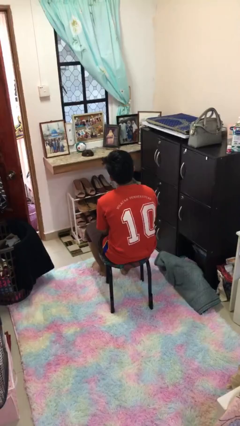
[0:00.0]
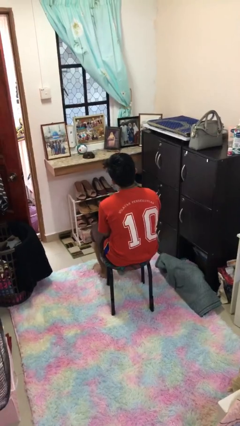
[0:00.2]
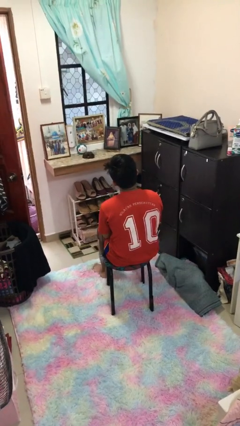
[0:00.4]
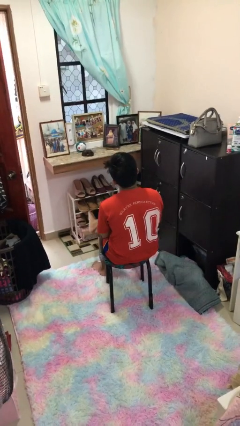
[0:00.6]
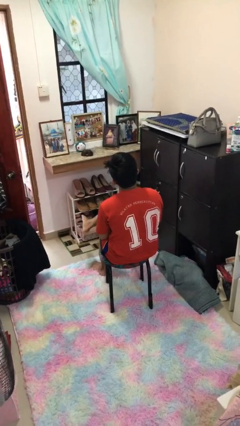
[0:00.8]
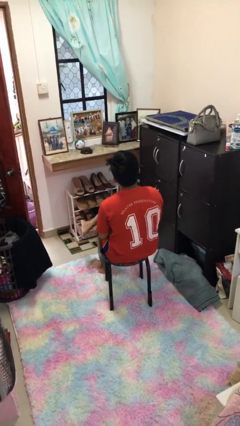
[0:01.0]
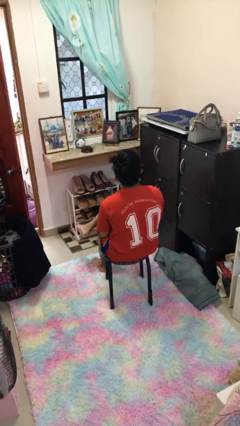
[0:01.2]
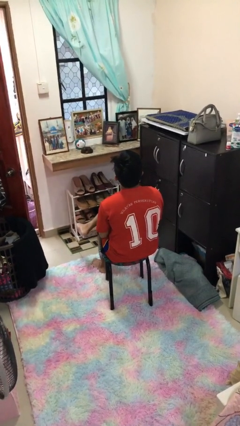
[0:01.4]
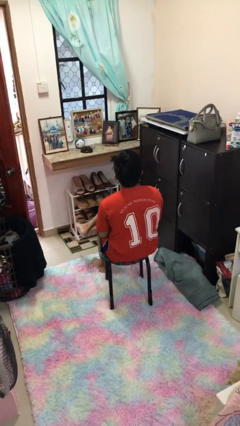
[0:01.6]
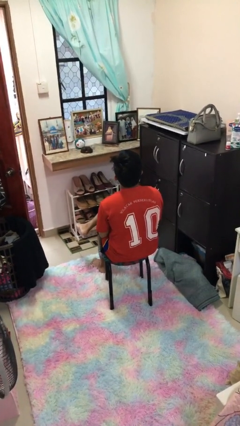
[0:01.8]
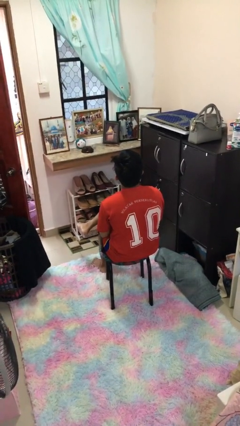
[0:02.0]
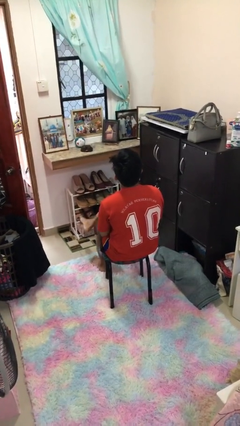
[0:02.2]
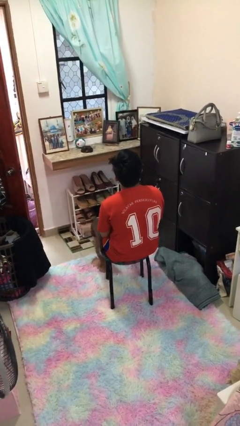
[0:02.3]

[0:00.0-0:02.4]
person crosses legs

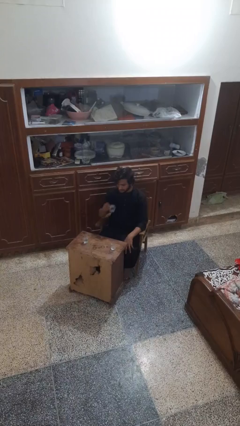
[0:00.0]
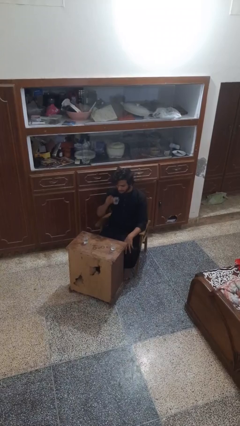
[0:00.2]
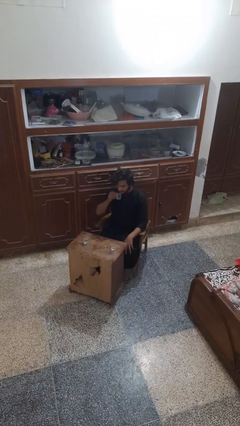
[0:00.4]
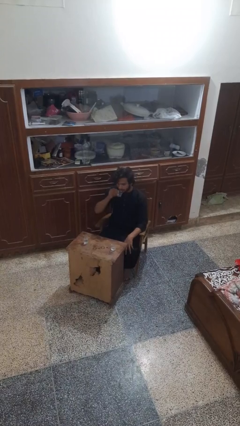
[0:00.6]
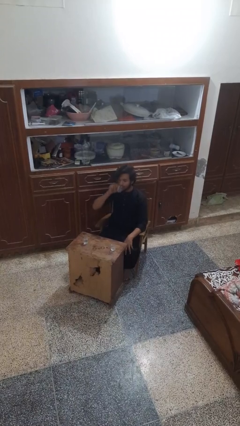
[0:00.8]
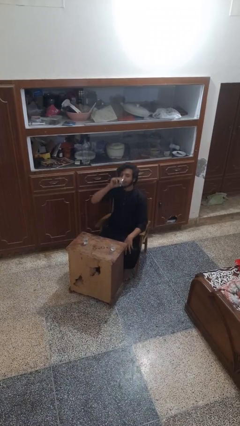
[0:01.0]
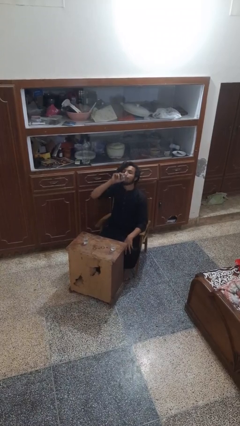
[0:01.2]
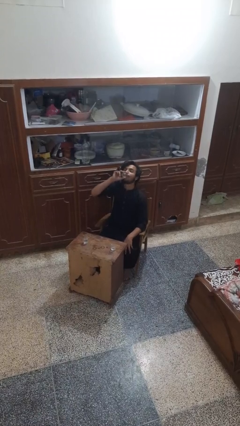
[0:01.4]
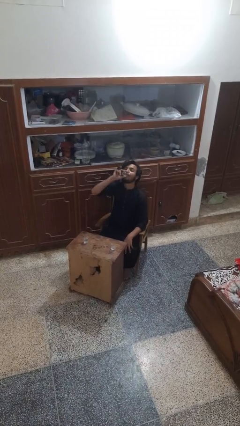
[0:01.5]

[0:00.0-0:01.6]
person drinks from shotglass

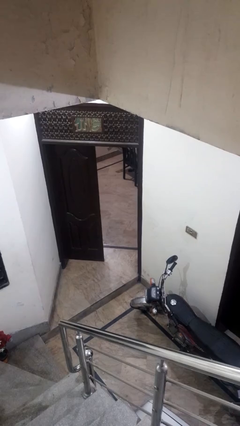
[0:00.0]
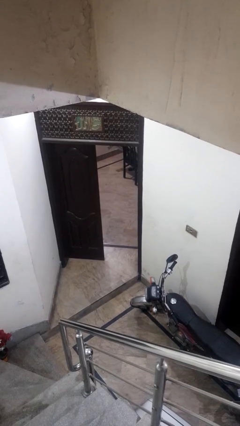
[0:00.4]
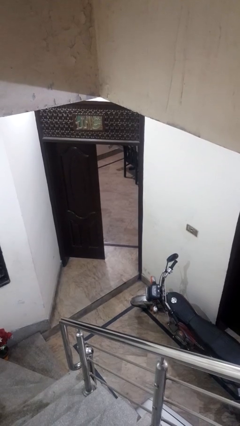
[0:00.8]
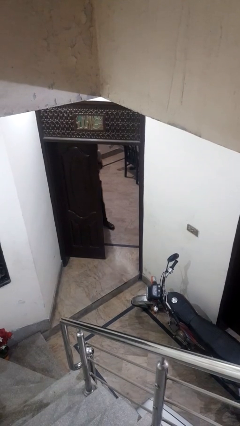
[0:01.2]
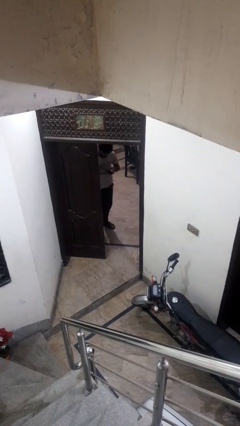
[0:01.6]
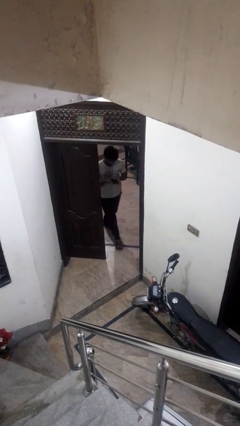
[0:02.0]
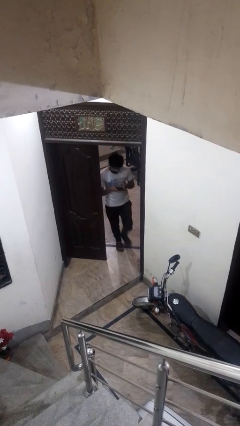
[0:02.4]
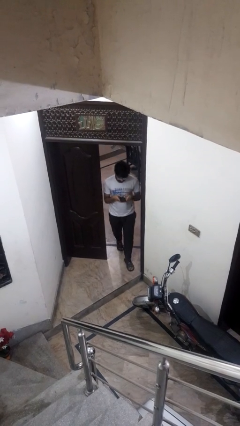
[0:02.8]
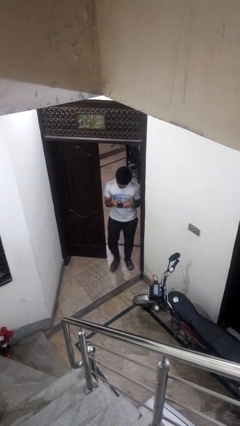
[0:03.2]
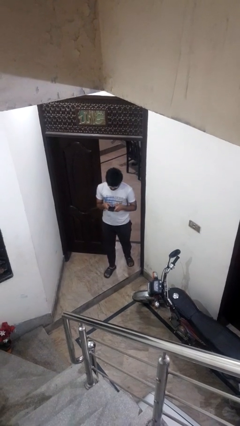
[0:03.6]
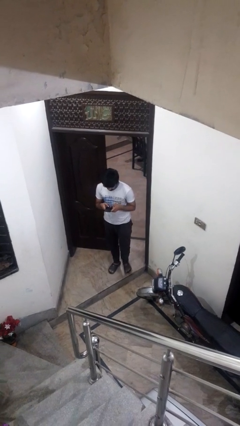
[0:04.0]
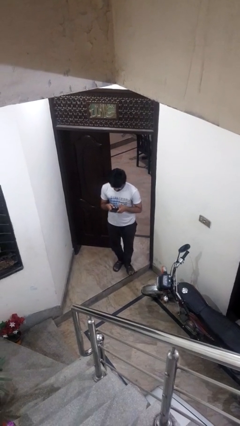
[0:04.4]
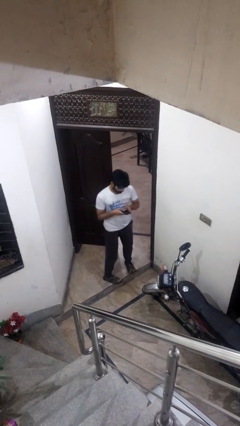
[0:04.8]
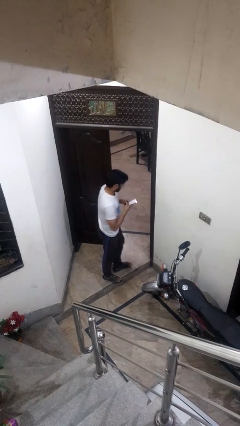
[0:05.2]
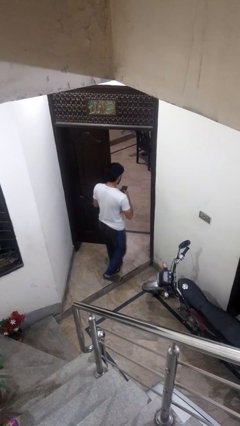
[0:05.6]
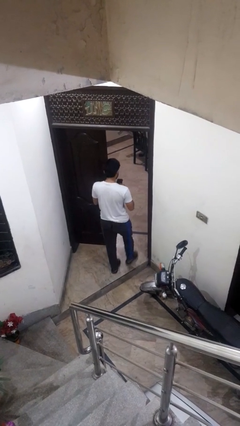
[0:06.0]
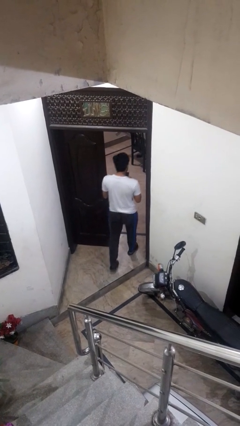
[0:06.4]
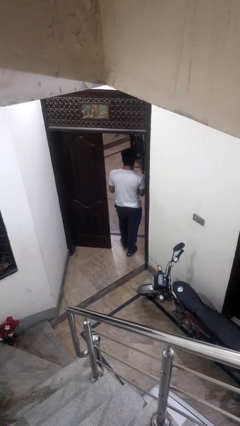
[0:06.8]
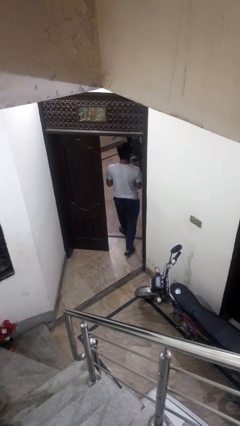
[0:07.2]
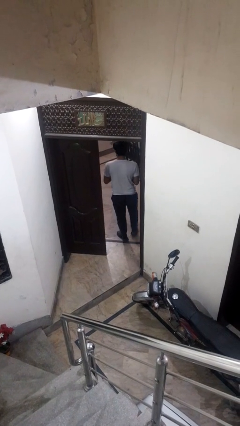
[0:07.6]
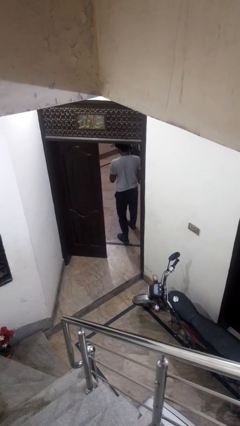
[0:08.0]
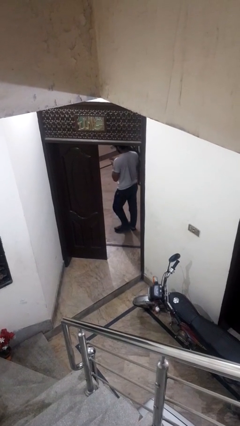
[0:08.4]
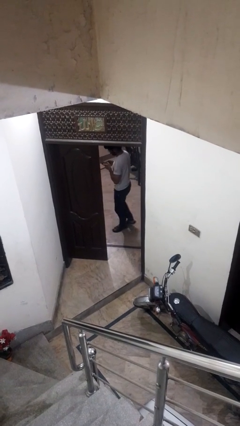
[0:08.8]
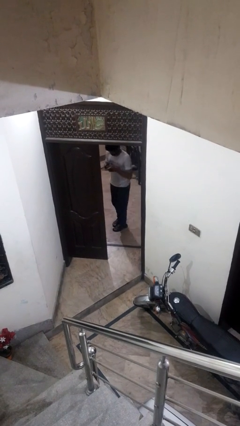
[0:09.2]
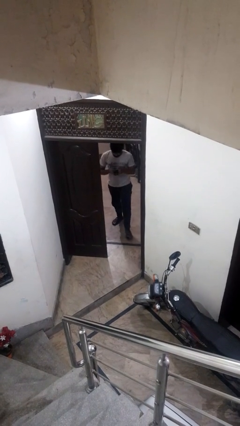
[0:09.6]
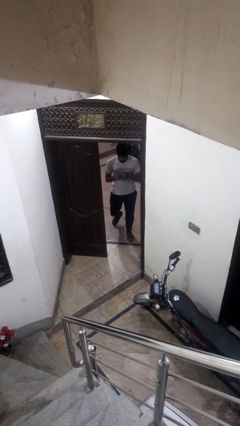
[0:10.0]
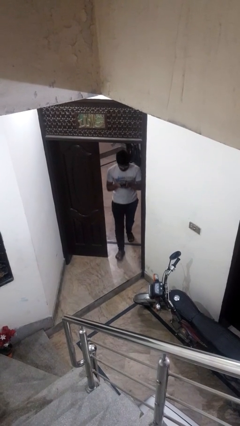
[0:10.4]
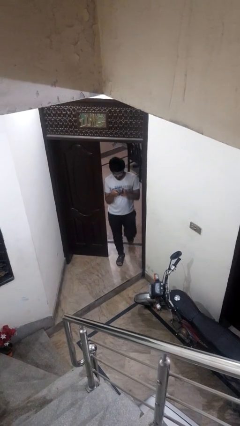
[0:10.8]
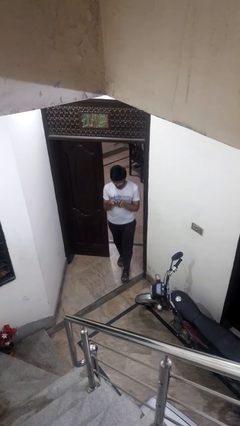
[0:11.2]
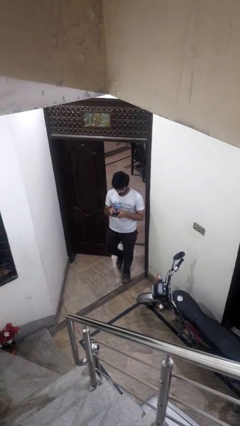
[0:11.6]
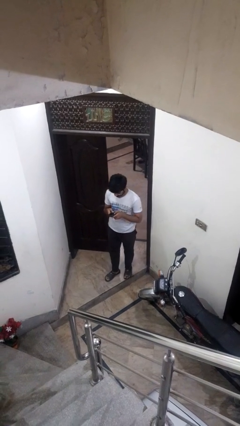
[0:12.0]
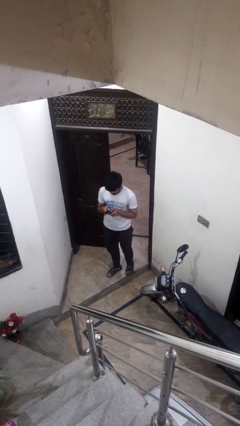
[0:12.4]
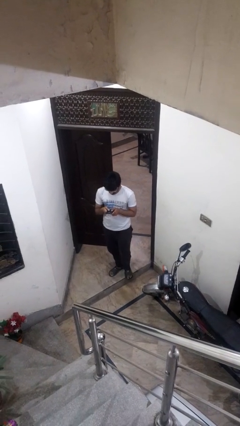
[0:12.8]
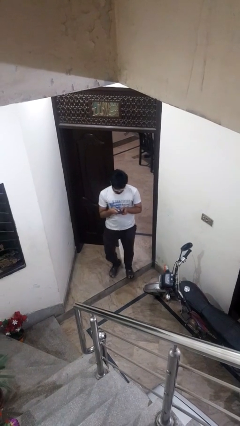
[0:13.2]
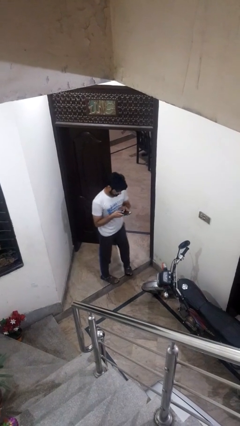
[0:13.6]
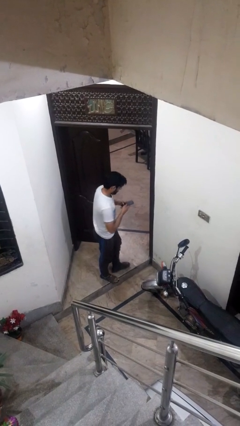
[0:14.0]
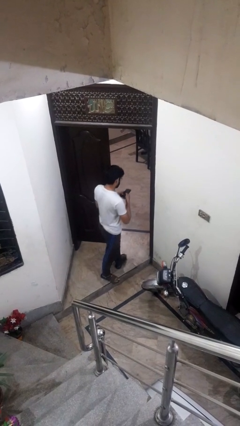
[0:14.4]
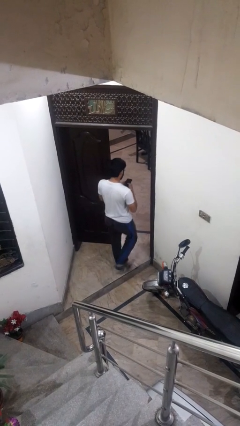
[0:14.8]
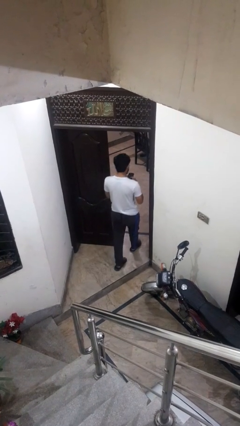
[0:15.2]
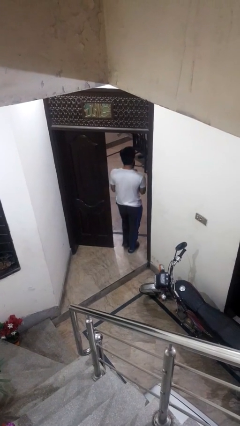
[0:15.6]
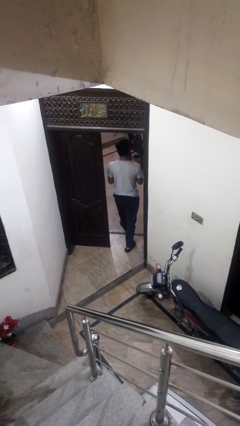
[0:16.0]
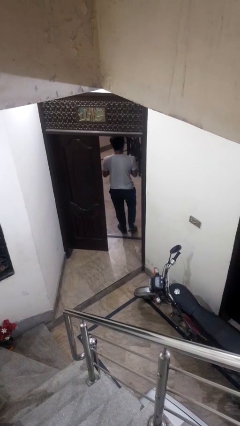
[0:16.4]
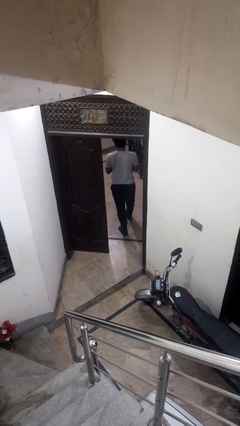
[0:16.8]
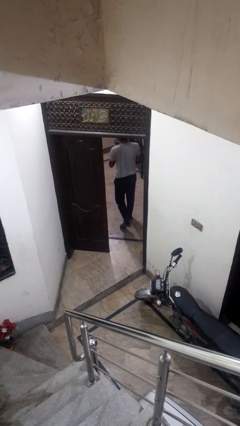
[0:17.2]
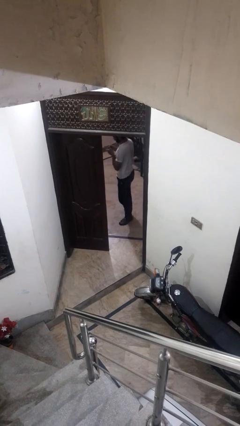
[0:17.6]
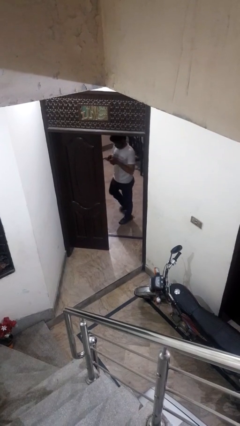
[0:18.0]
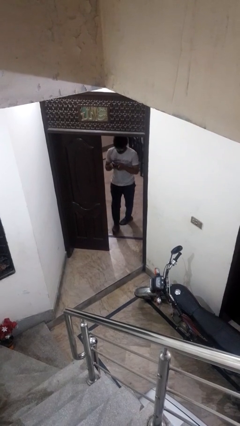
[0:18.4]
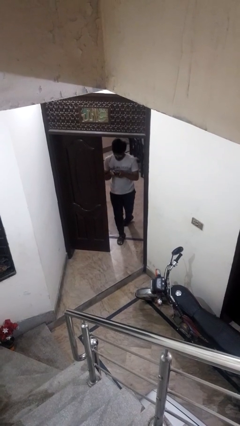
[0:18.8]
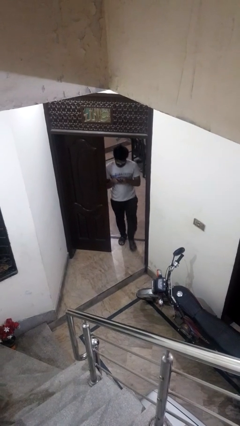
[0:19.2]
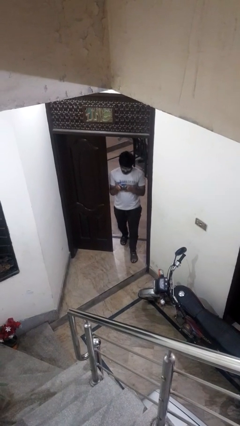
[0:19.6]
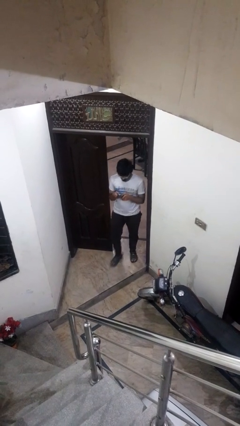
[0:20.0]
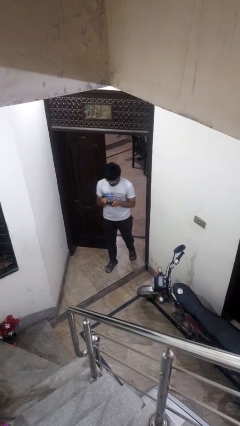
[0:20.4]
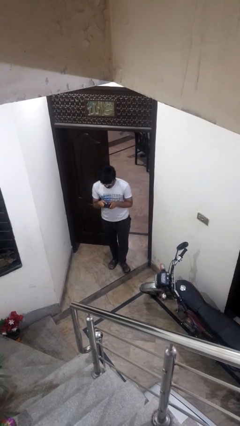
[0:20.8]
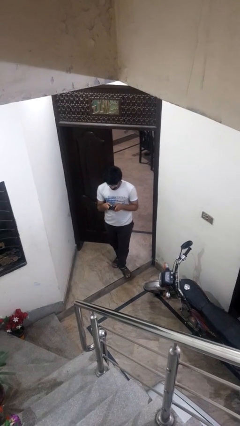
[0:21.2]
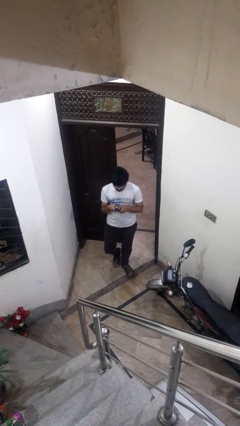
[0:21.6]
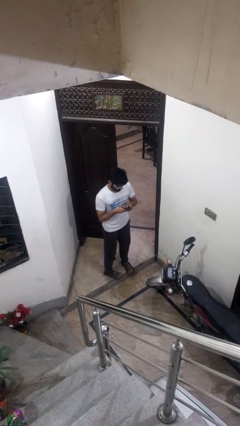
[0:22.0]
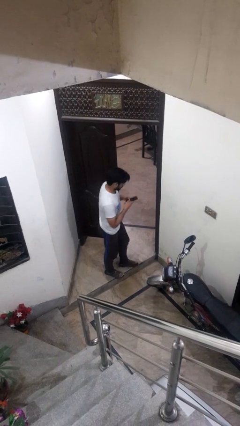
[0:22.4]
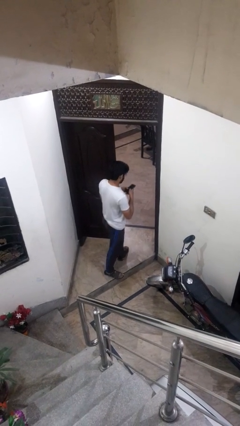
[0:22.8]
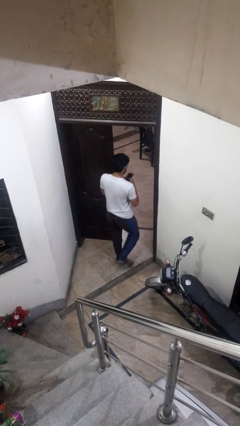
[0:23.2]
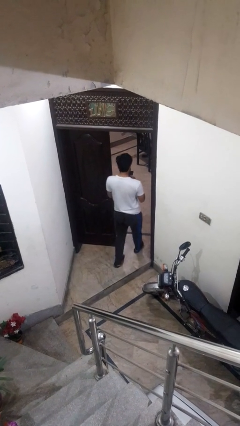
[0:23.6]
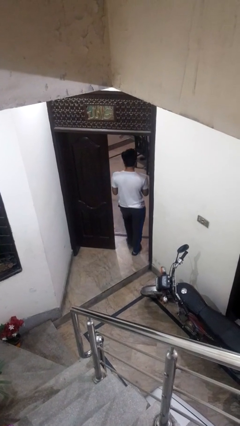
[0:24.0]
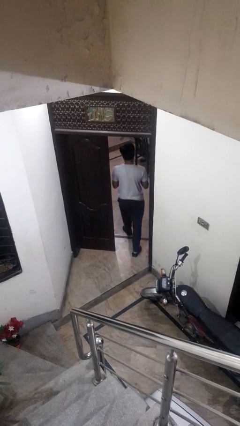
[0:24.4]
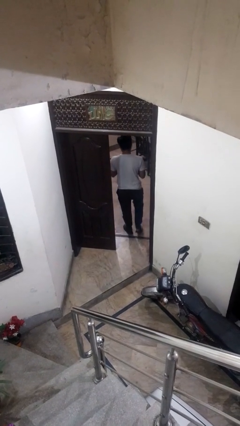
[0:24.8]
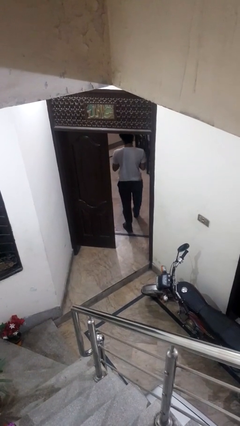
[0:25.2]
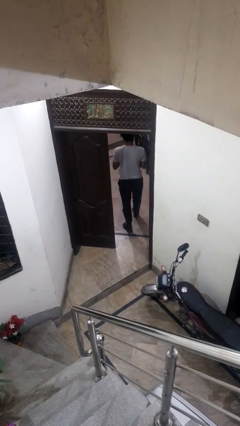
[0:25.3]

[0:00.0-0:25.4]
person texts on phone

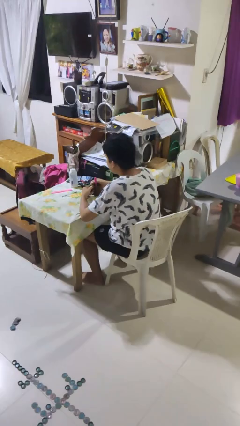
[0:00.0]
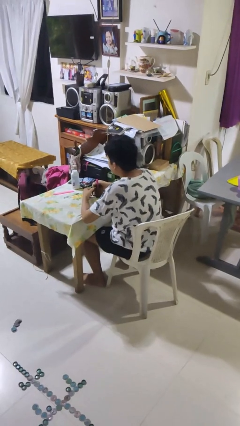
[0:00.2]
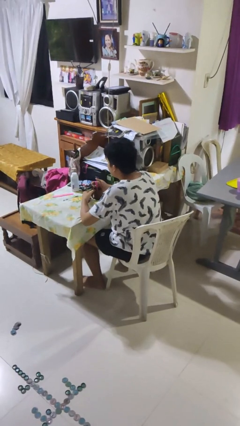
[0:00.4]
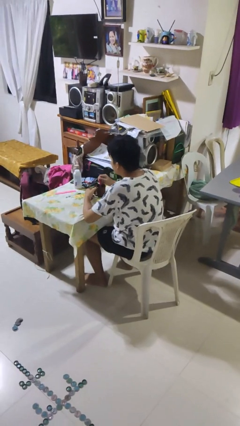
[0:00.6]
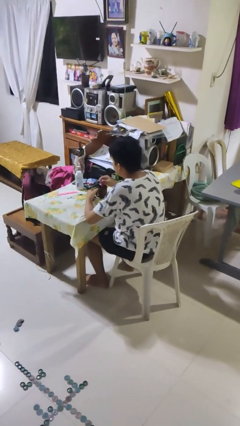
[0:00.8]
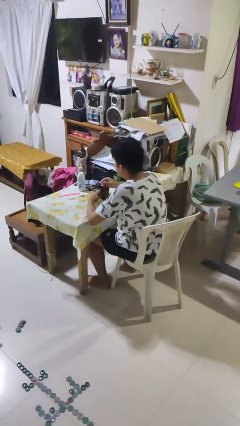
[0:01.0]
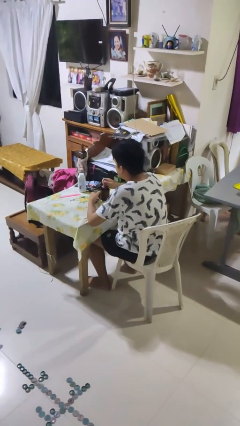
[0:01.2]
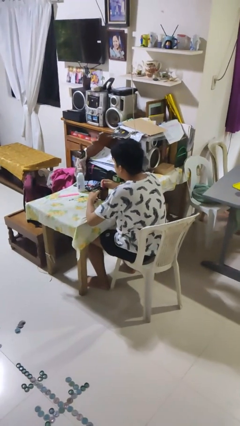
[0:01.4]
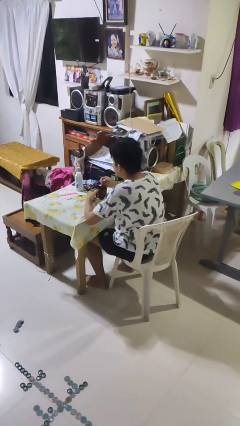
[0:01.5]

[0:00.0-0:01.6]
person stirs mug
